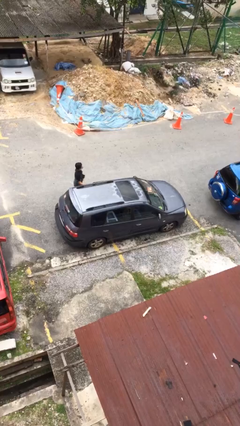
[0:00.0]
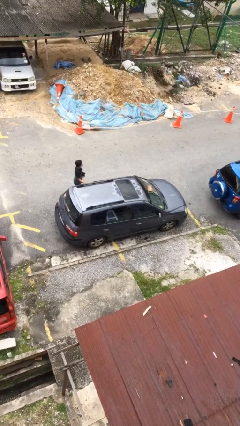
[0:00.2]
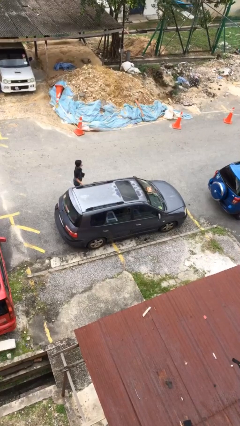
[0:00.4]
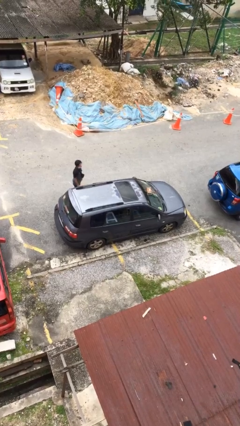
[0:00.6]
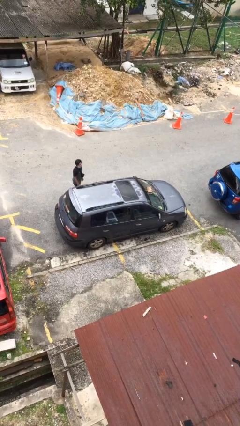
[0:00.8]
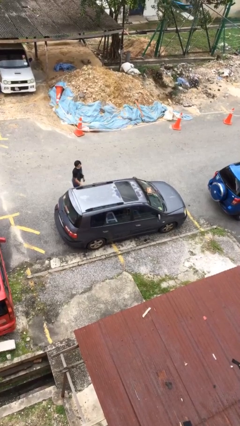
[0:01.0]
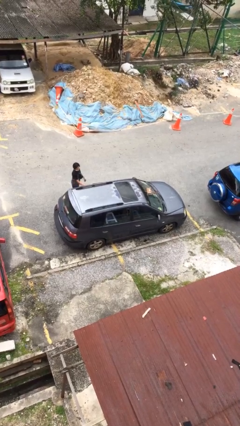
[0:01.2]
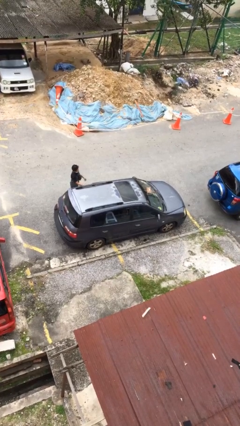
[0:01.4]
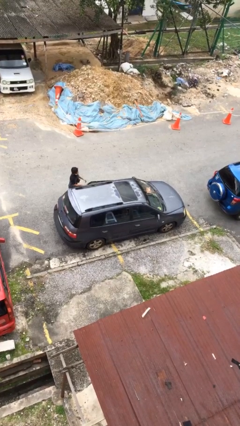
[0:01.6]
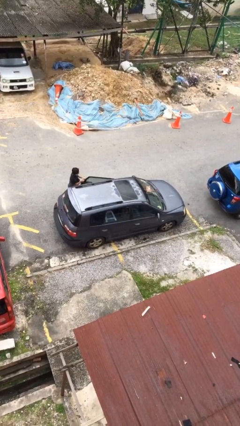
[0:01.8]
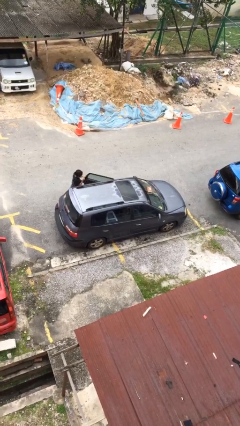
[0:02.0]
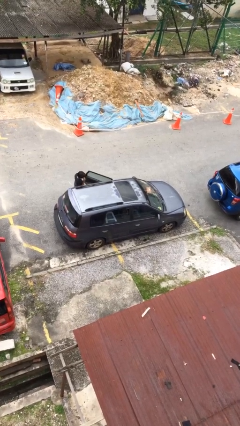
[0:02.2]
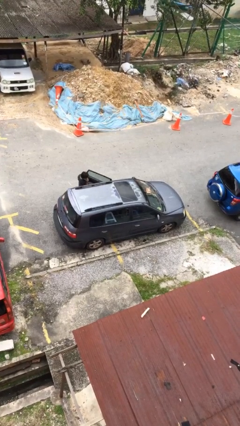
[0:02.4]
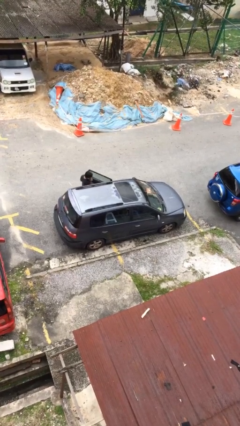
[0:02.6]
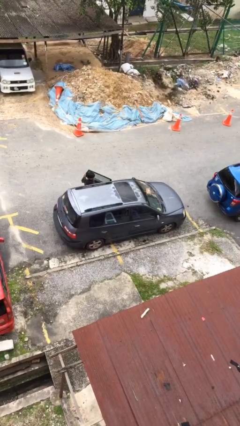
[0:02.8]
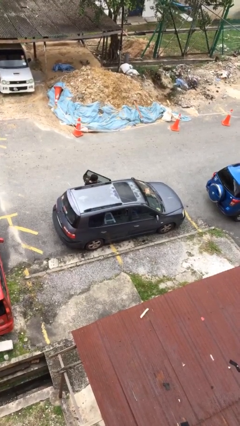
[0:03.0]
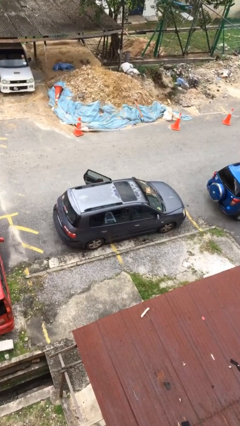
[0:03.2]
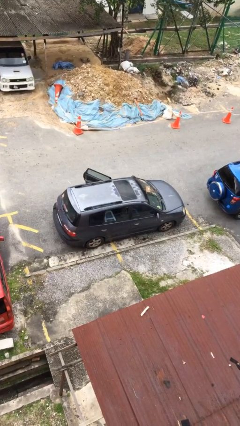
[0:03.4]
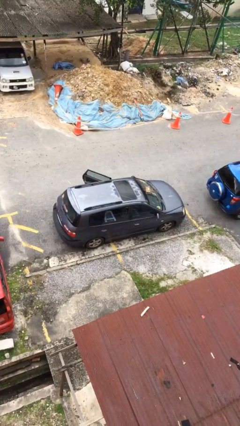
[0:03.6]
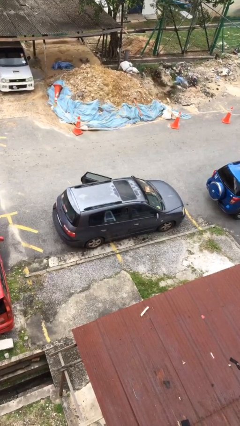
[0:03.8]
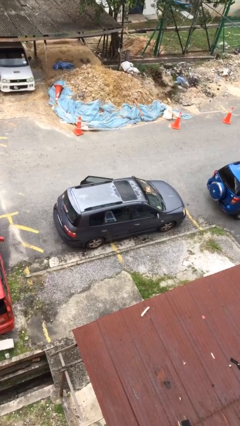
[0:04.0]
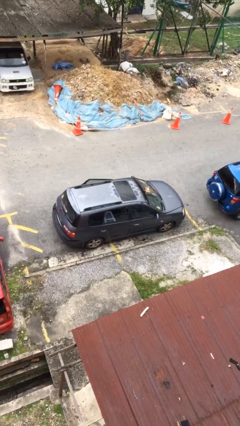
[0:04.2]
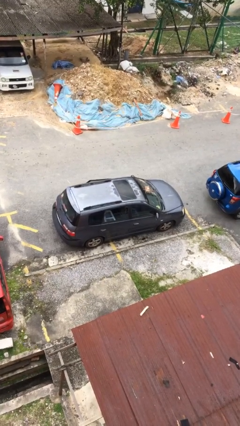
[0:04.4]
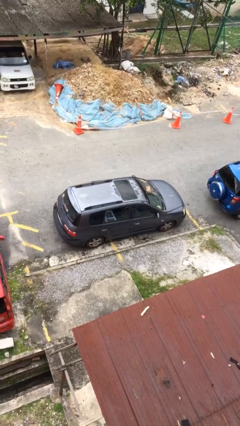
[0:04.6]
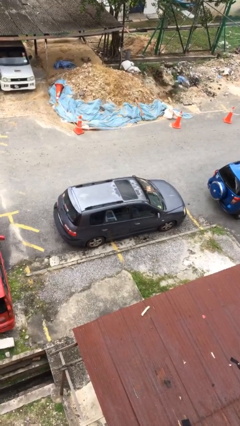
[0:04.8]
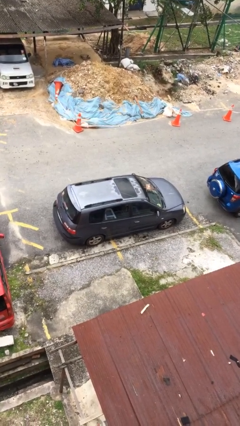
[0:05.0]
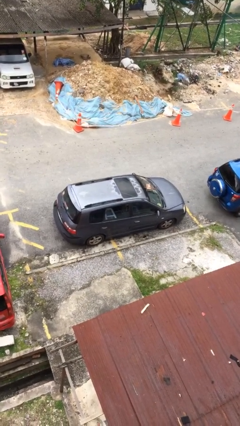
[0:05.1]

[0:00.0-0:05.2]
car picks up person

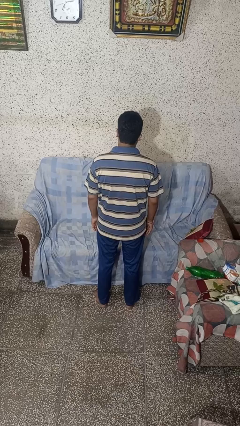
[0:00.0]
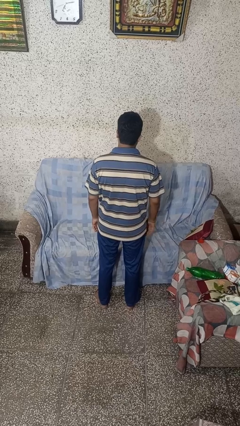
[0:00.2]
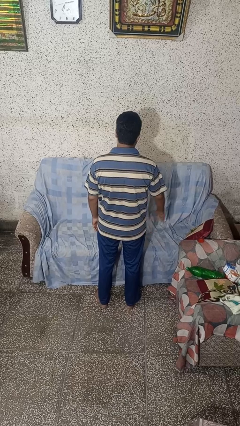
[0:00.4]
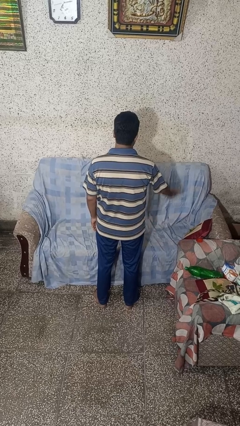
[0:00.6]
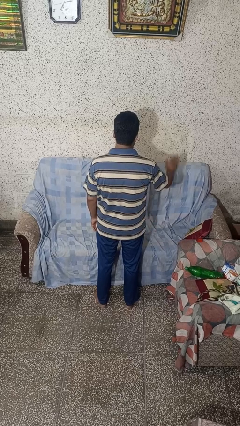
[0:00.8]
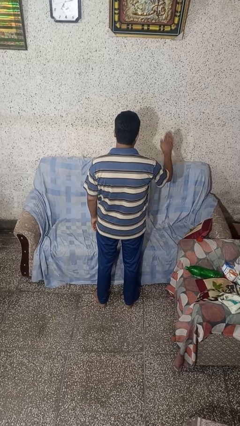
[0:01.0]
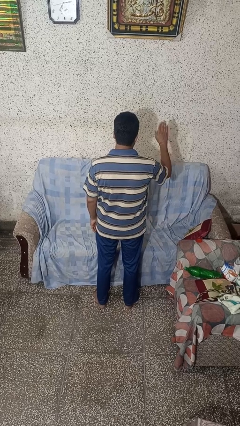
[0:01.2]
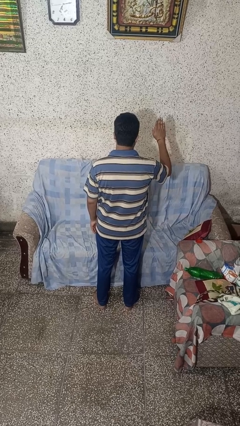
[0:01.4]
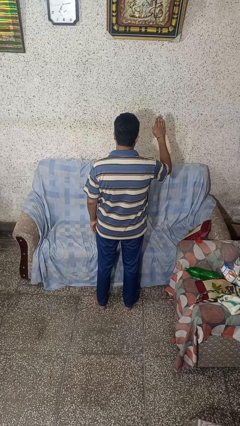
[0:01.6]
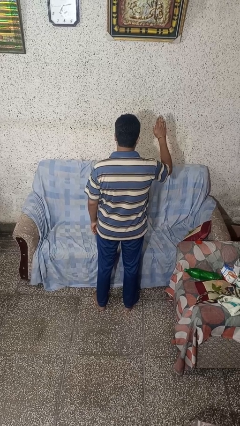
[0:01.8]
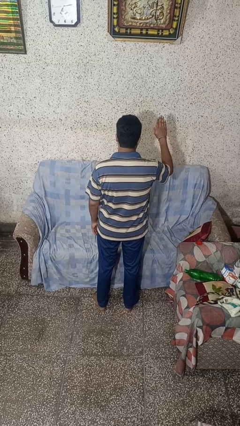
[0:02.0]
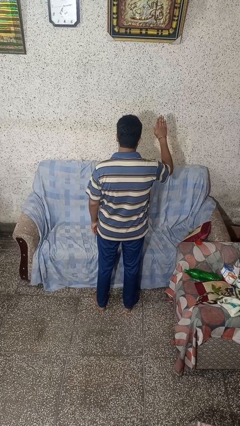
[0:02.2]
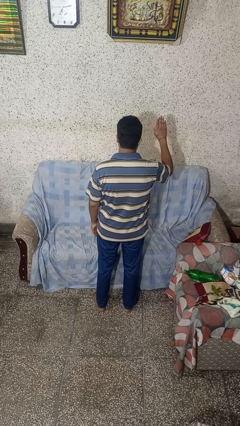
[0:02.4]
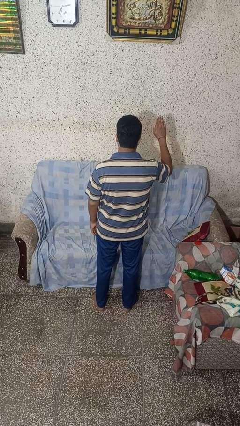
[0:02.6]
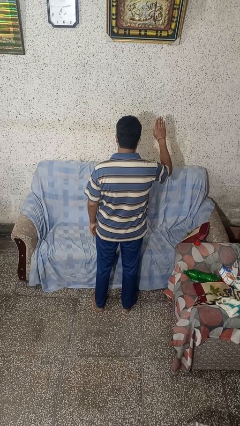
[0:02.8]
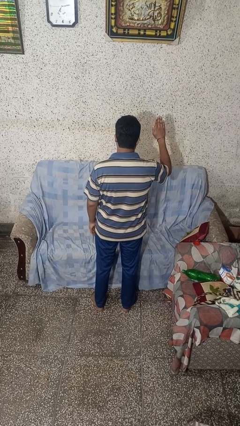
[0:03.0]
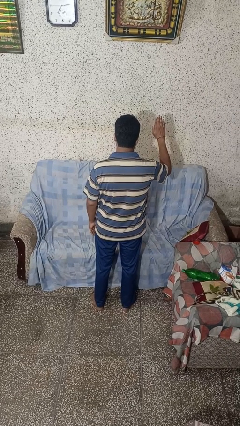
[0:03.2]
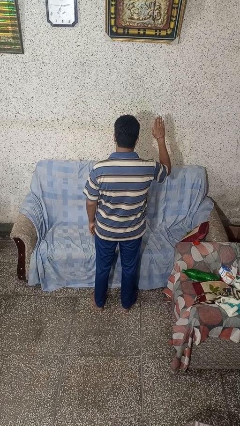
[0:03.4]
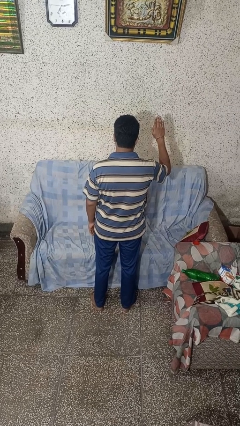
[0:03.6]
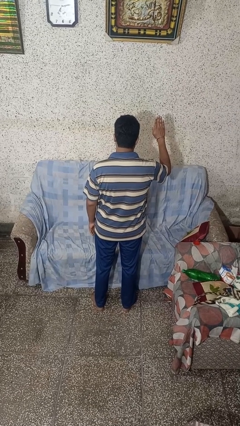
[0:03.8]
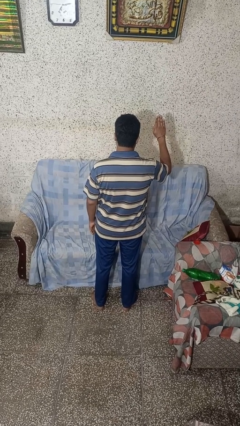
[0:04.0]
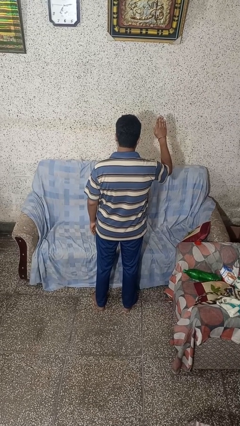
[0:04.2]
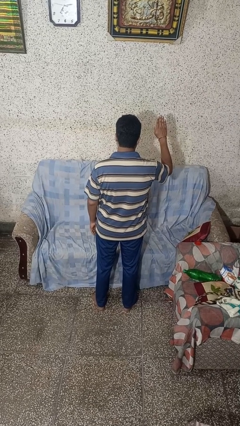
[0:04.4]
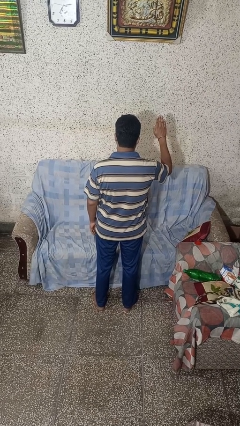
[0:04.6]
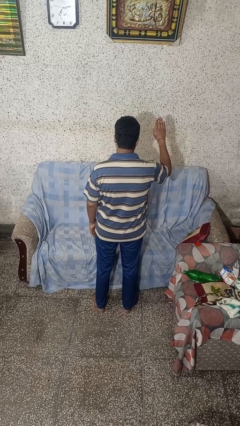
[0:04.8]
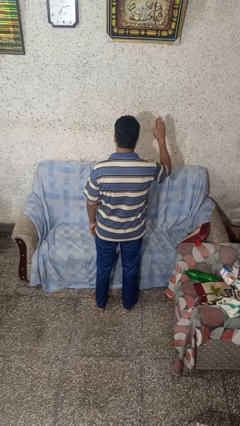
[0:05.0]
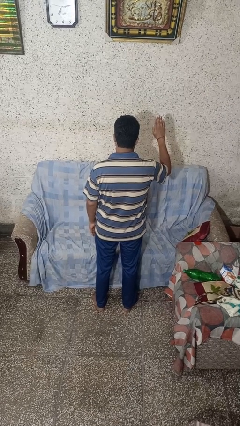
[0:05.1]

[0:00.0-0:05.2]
person gestures stop

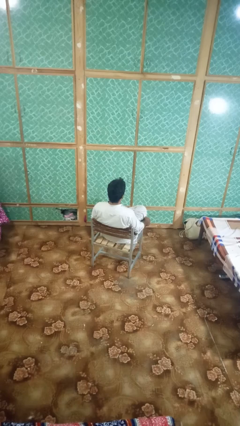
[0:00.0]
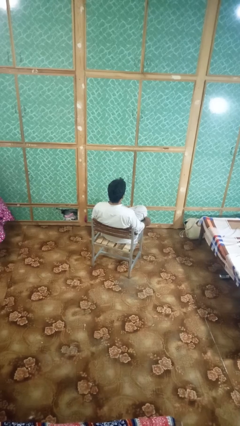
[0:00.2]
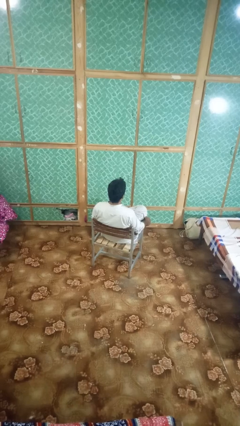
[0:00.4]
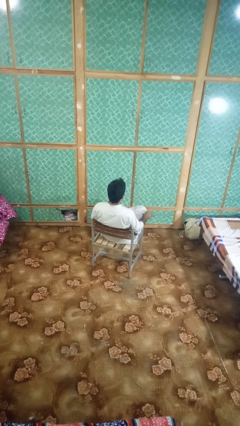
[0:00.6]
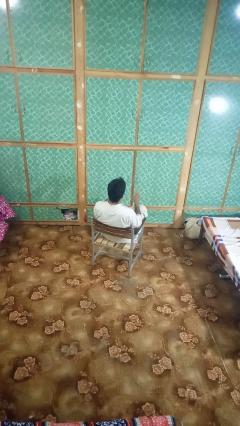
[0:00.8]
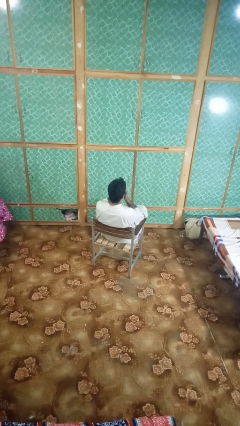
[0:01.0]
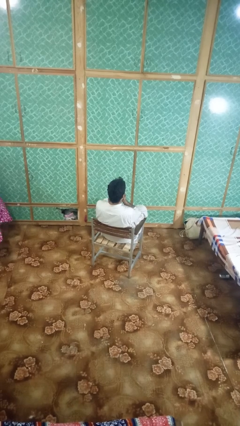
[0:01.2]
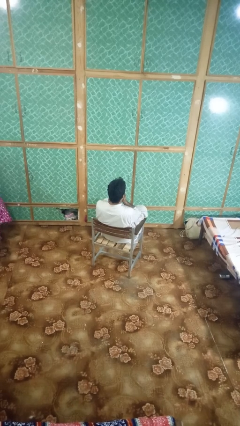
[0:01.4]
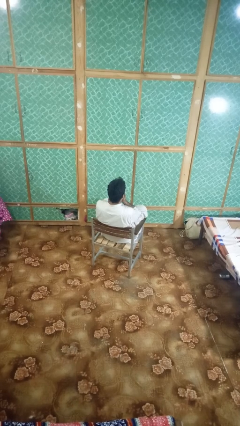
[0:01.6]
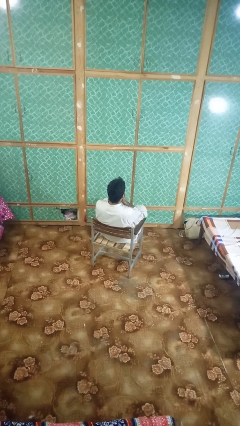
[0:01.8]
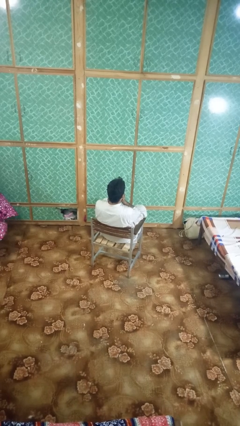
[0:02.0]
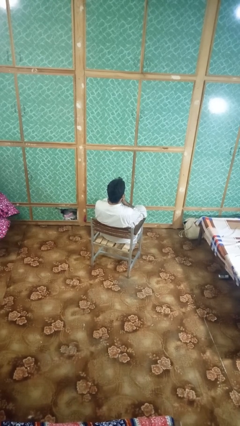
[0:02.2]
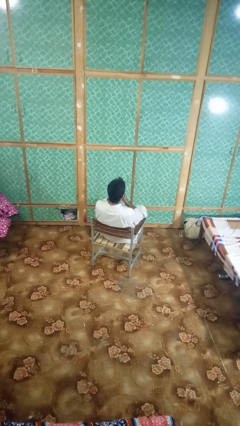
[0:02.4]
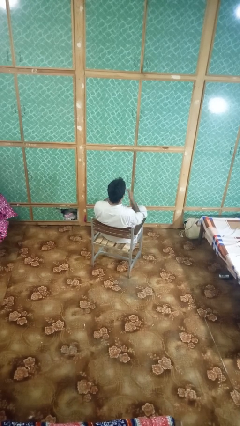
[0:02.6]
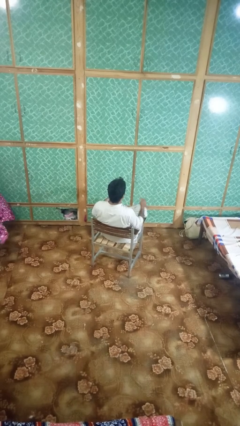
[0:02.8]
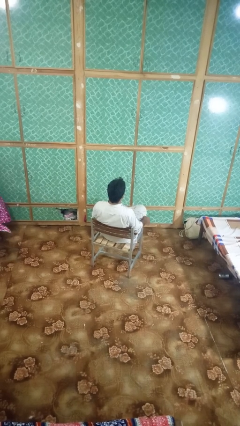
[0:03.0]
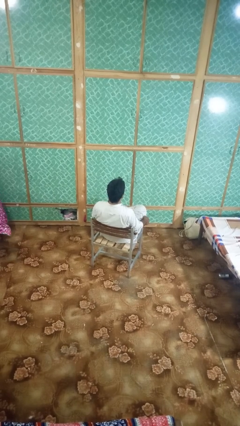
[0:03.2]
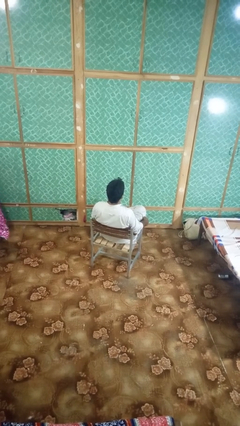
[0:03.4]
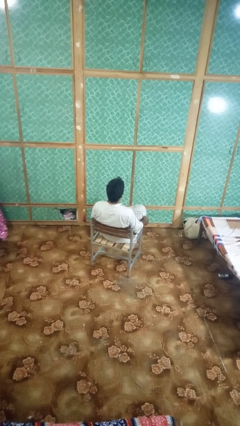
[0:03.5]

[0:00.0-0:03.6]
person sneezes into hand

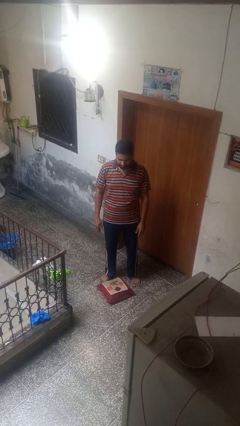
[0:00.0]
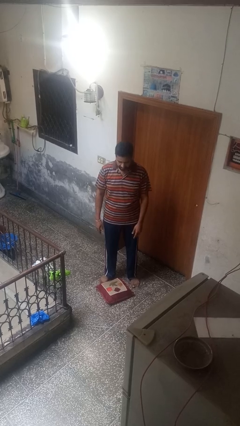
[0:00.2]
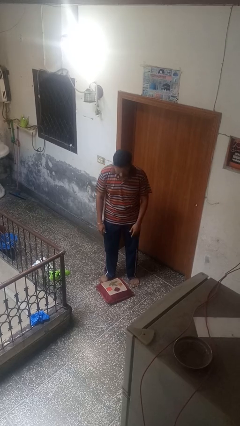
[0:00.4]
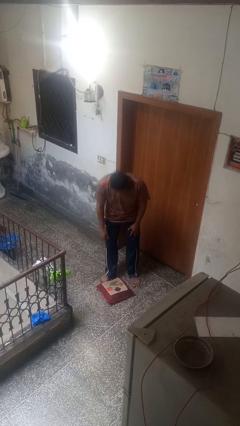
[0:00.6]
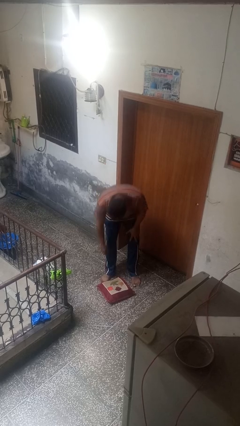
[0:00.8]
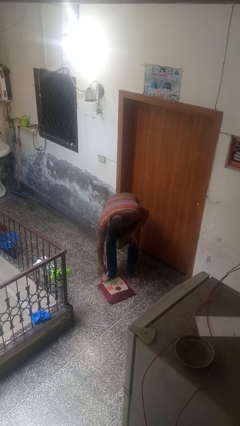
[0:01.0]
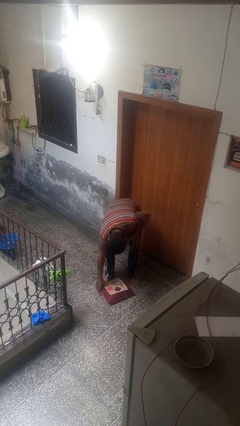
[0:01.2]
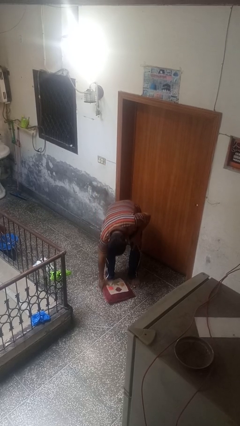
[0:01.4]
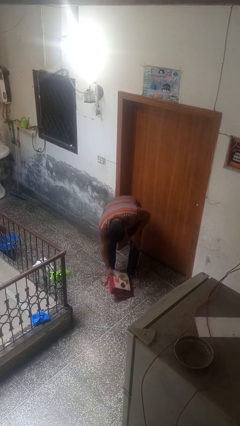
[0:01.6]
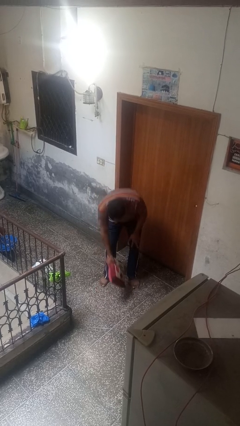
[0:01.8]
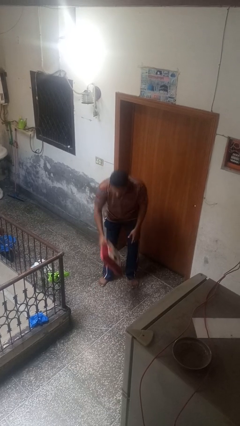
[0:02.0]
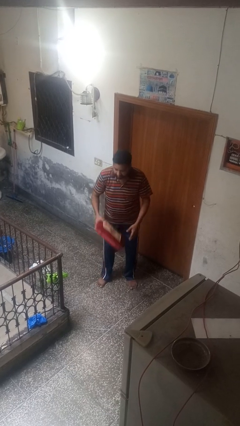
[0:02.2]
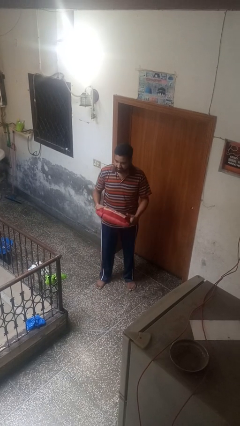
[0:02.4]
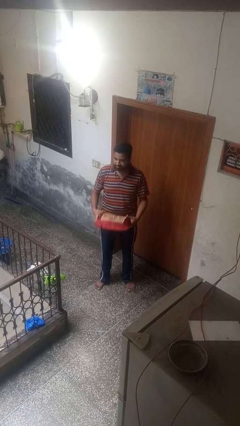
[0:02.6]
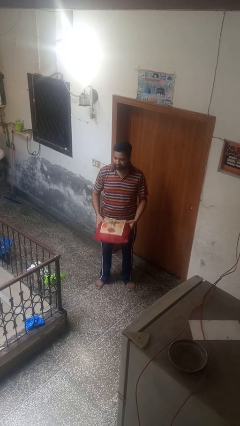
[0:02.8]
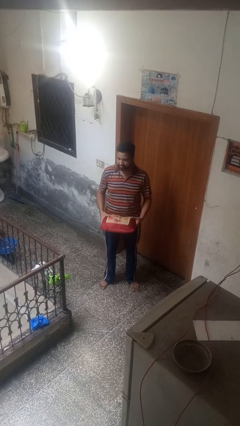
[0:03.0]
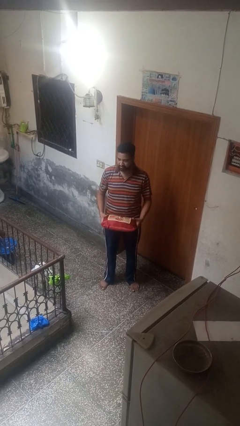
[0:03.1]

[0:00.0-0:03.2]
person picks up object from floor
